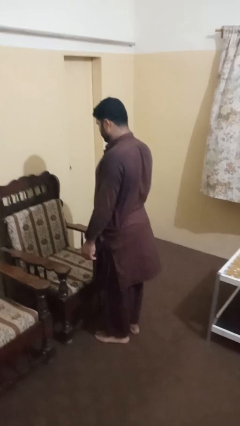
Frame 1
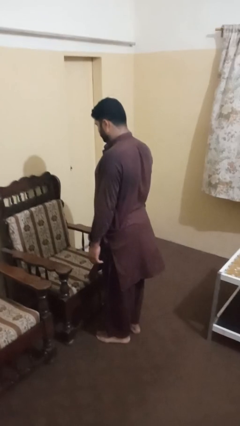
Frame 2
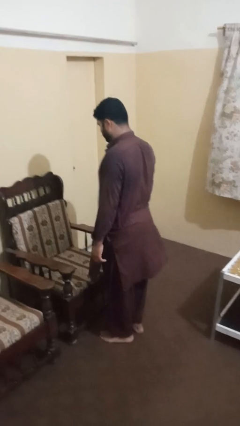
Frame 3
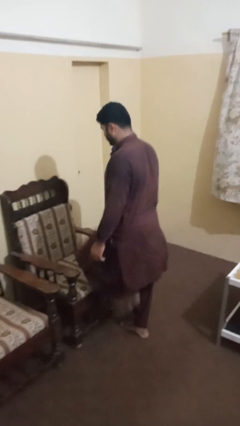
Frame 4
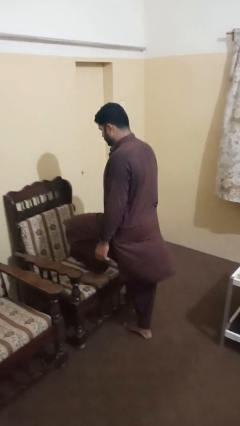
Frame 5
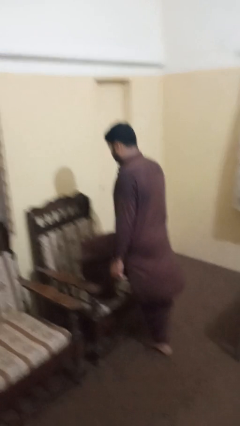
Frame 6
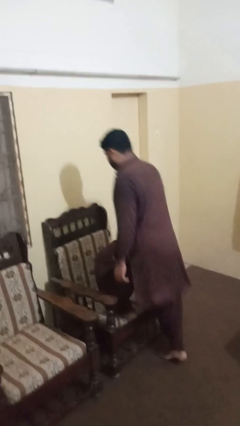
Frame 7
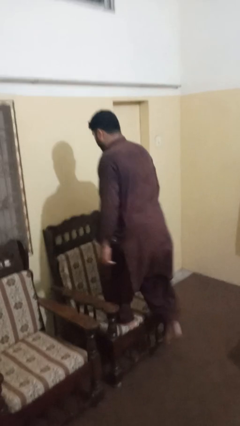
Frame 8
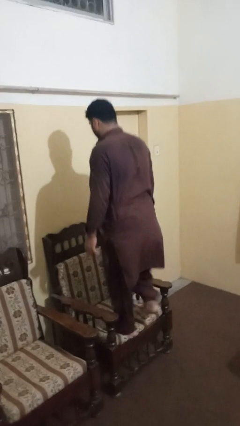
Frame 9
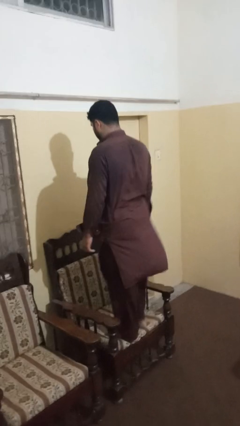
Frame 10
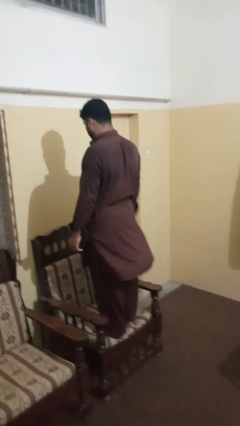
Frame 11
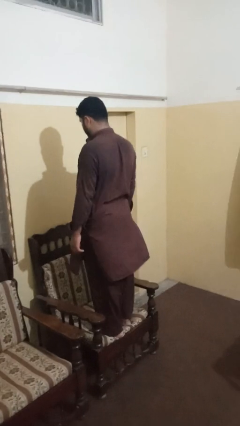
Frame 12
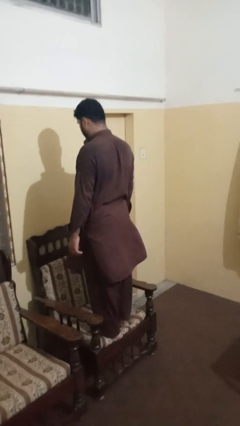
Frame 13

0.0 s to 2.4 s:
person climbs on chair

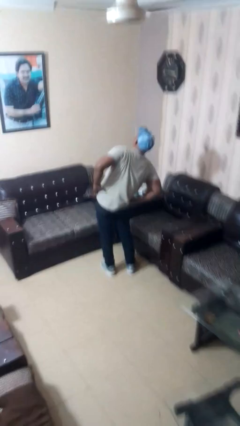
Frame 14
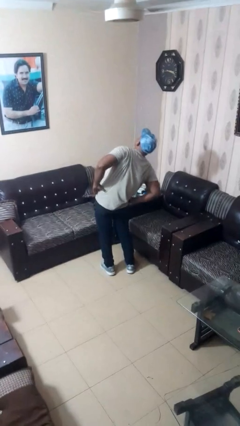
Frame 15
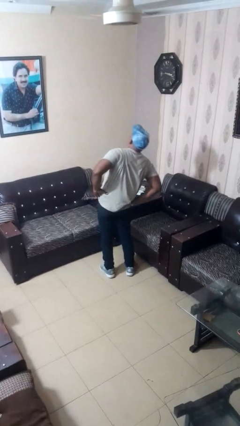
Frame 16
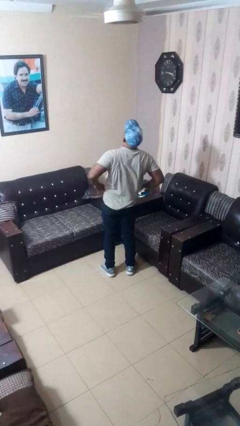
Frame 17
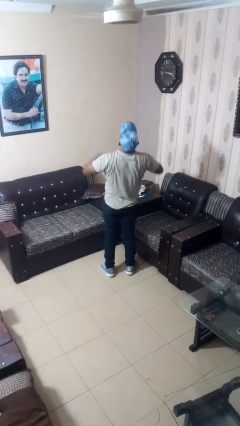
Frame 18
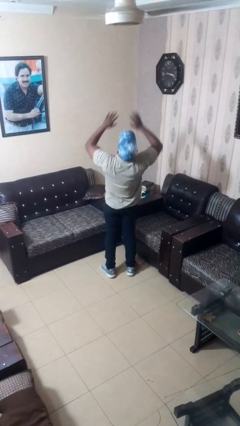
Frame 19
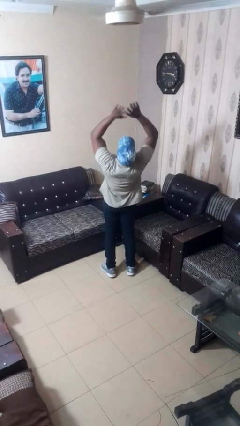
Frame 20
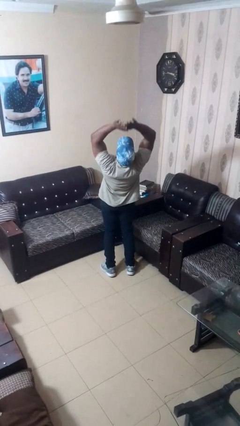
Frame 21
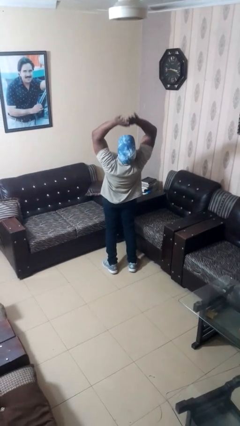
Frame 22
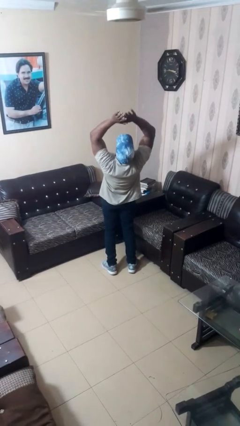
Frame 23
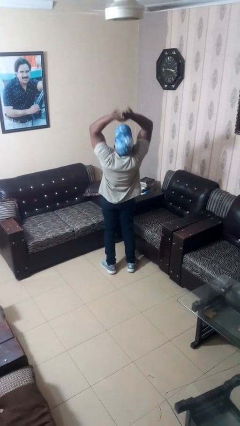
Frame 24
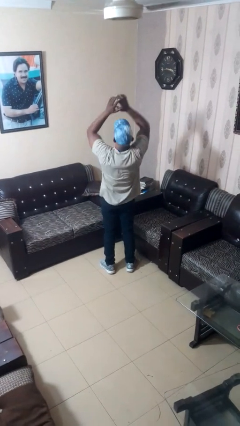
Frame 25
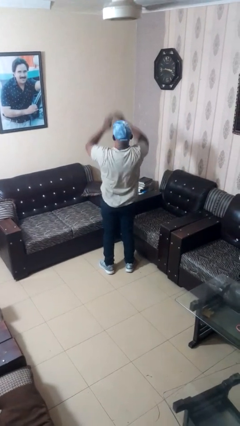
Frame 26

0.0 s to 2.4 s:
person stretches arms over head

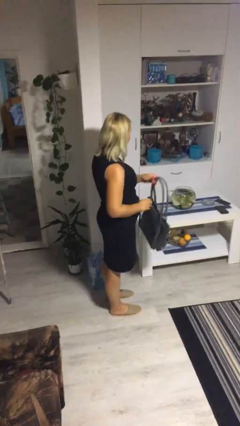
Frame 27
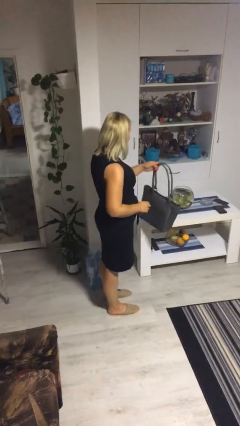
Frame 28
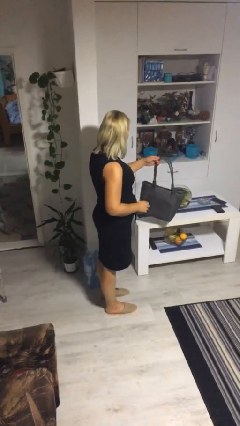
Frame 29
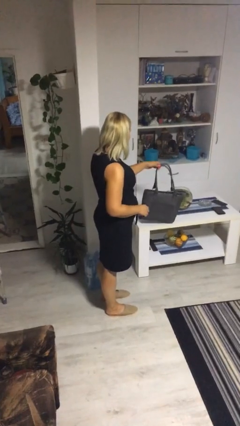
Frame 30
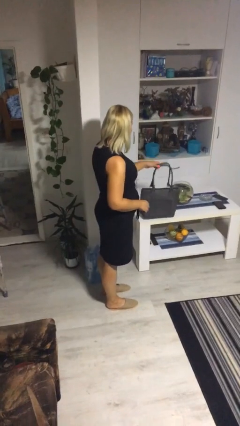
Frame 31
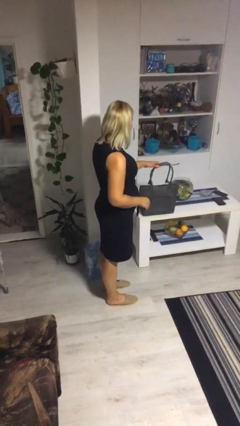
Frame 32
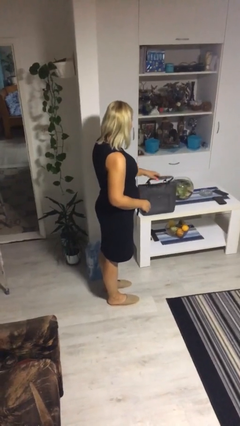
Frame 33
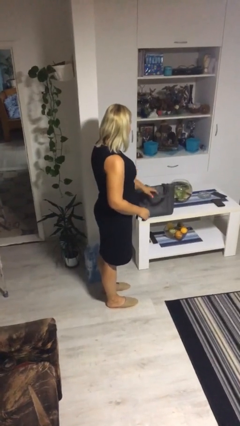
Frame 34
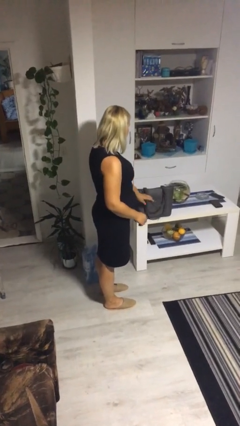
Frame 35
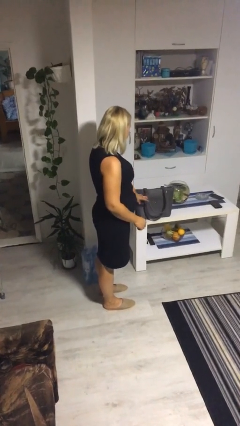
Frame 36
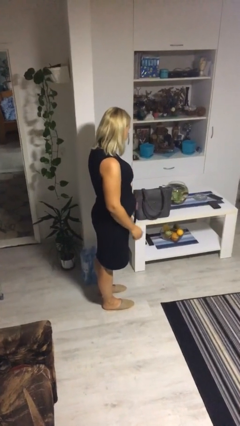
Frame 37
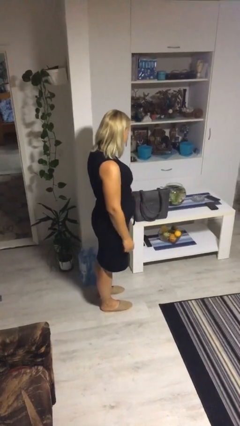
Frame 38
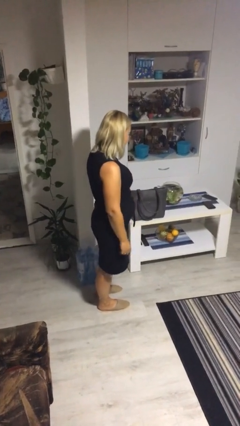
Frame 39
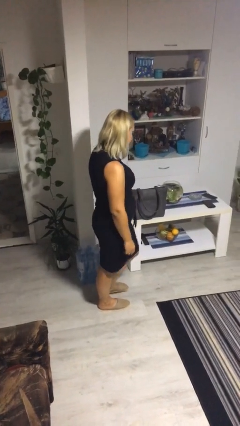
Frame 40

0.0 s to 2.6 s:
person puts down object on table

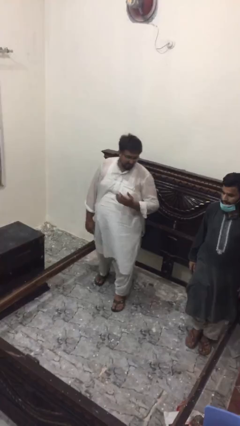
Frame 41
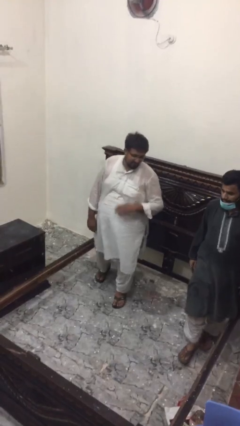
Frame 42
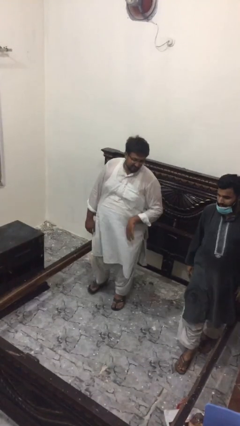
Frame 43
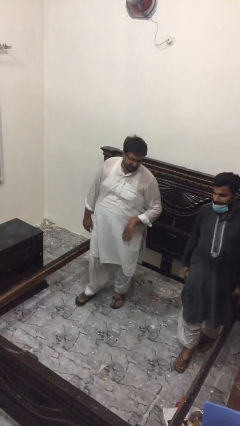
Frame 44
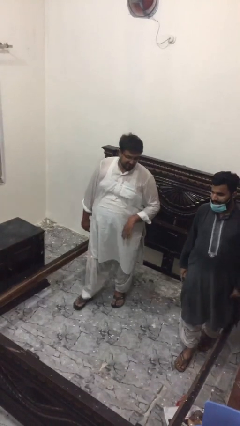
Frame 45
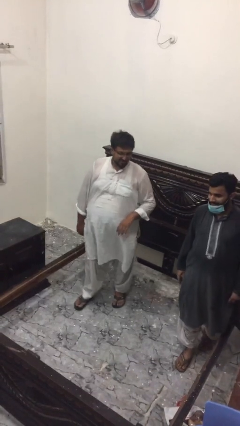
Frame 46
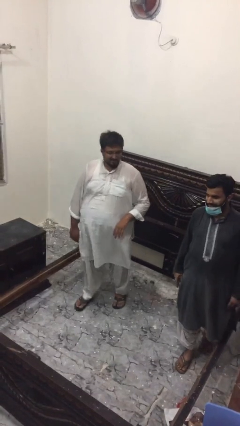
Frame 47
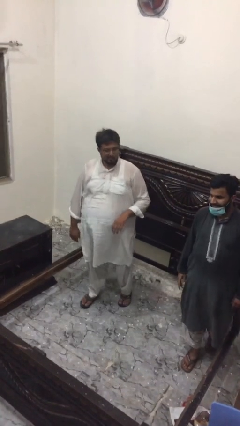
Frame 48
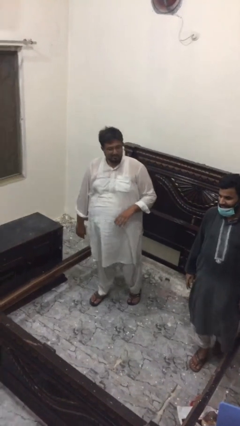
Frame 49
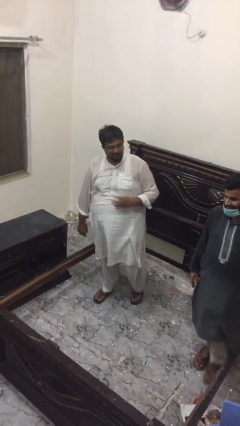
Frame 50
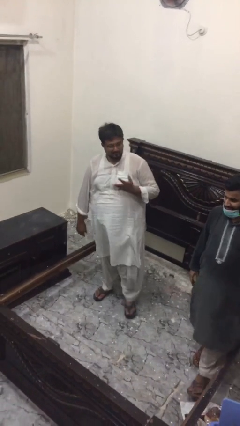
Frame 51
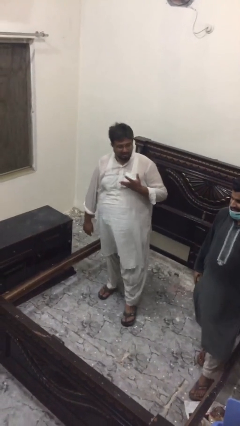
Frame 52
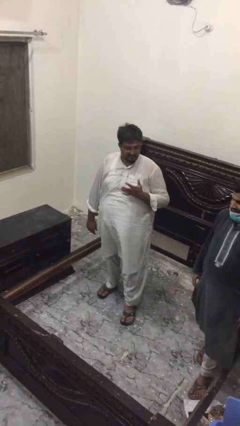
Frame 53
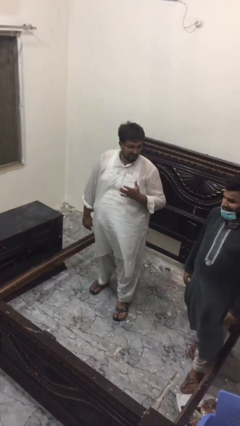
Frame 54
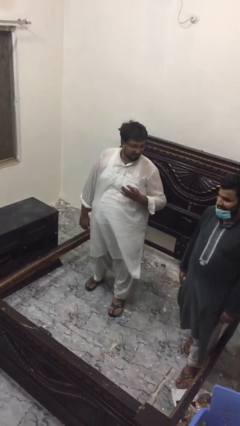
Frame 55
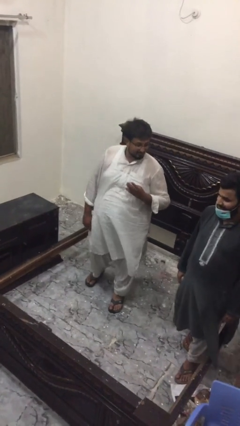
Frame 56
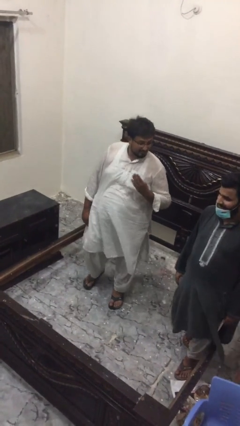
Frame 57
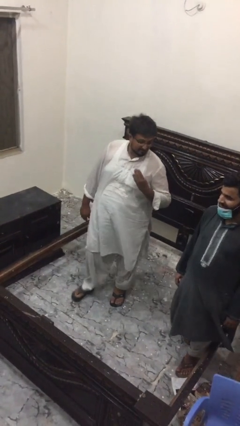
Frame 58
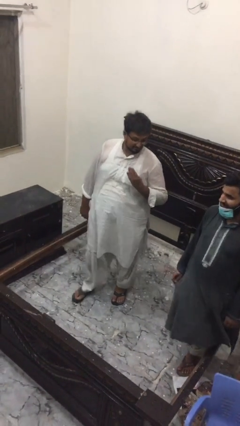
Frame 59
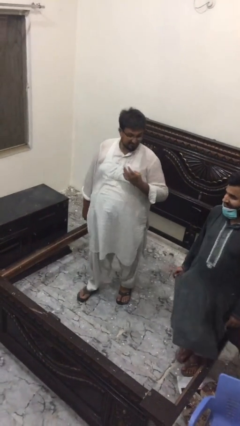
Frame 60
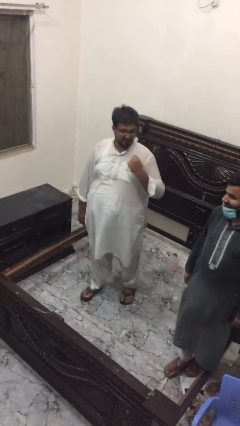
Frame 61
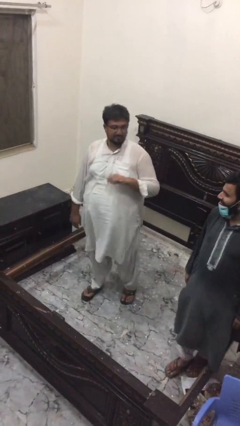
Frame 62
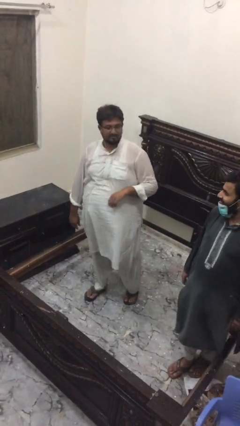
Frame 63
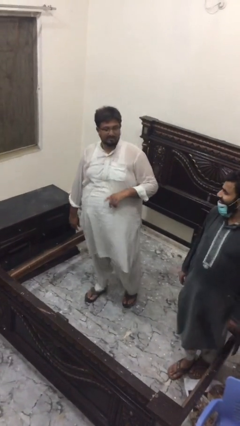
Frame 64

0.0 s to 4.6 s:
person talks to person

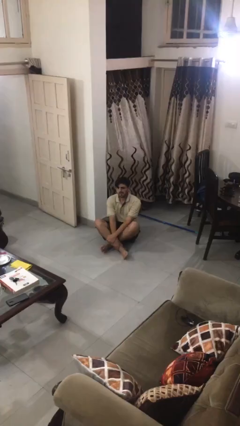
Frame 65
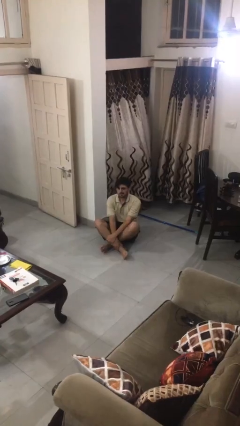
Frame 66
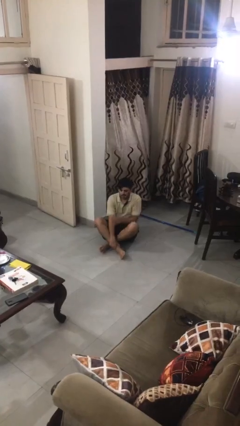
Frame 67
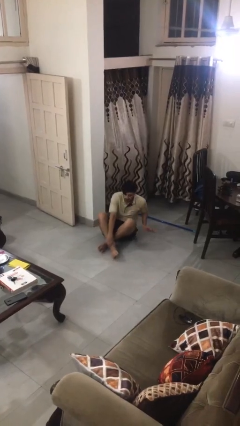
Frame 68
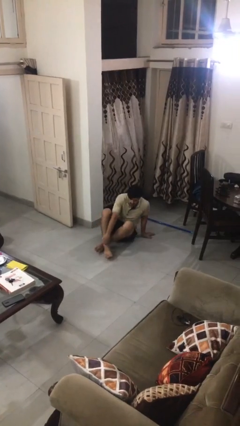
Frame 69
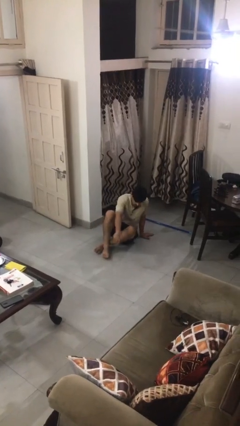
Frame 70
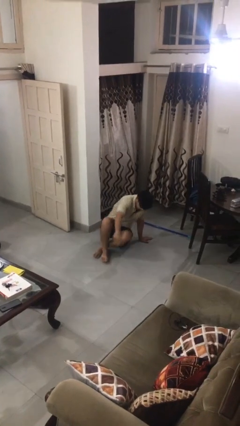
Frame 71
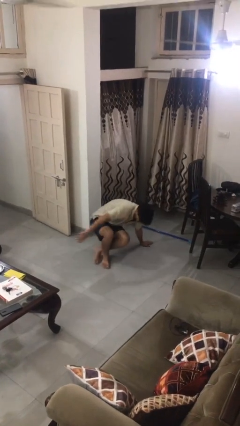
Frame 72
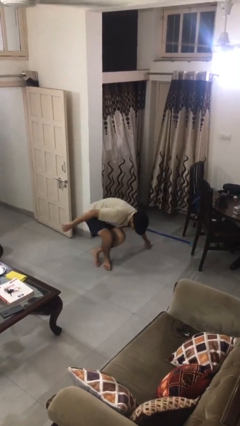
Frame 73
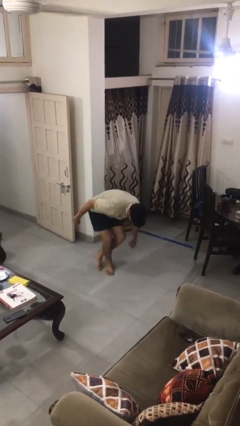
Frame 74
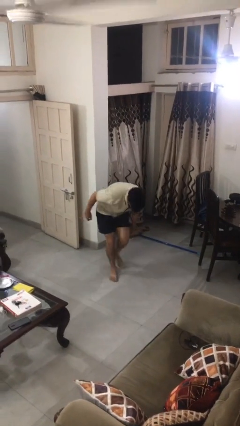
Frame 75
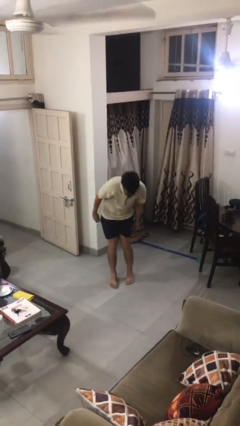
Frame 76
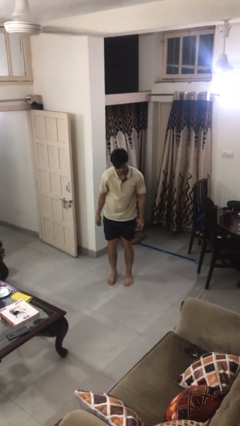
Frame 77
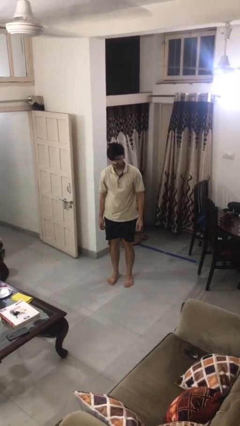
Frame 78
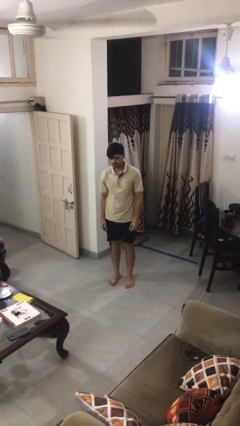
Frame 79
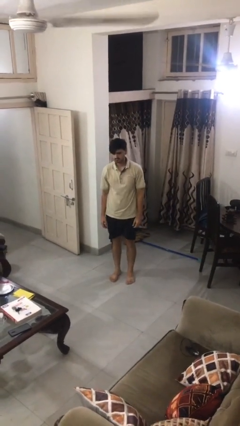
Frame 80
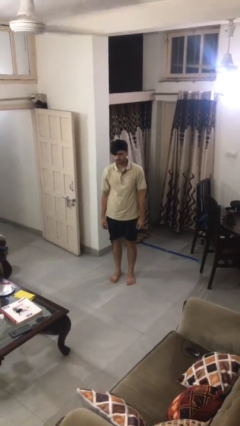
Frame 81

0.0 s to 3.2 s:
person stands up from floor

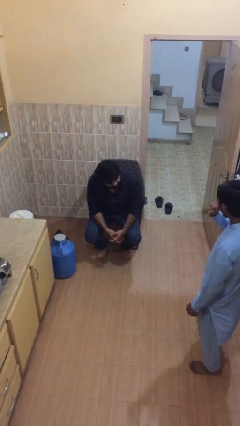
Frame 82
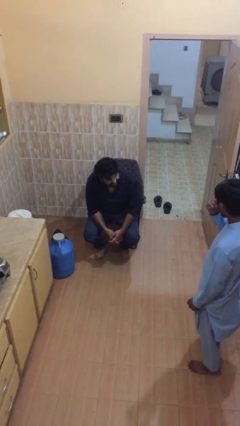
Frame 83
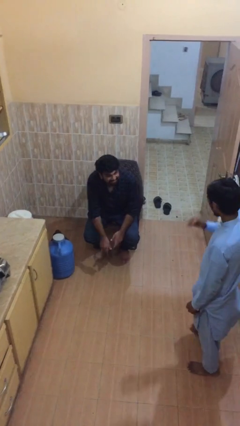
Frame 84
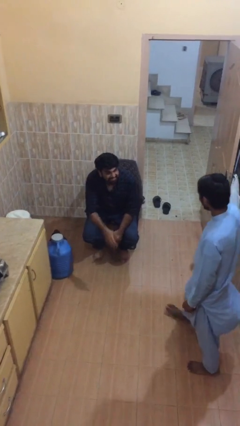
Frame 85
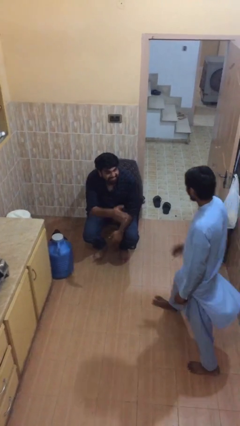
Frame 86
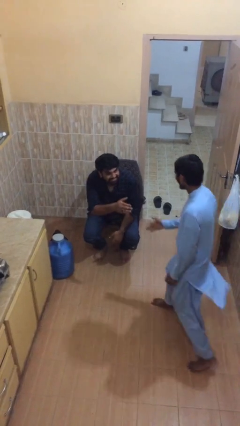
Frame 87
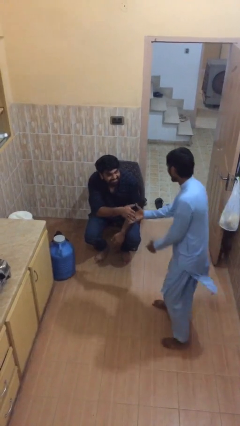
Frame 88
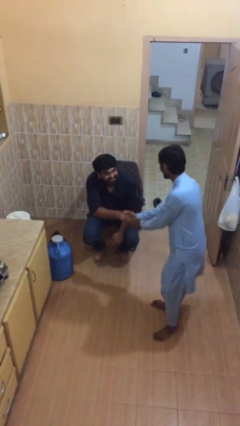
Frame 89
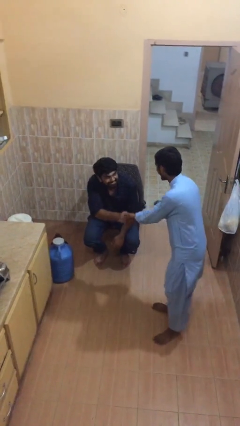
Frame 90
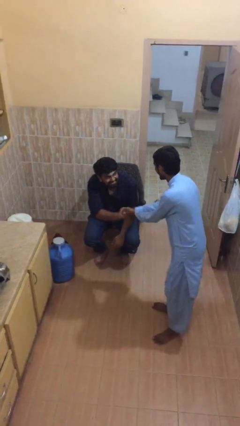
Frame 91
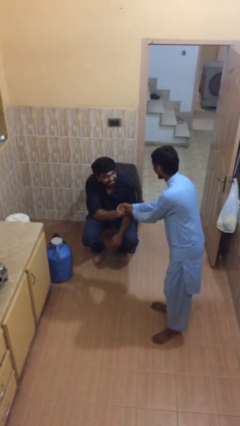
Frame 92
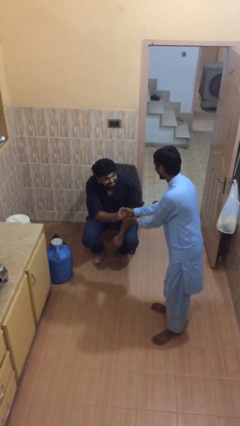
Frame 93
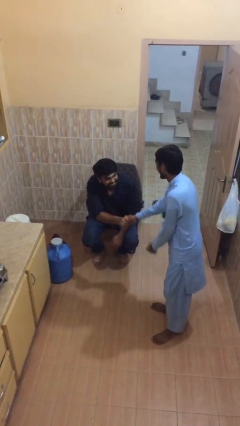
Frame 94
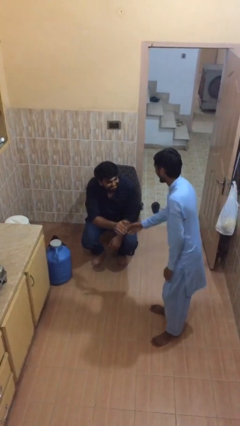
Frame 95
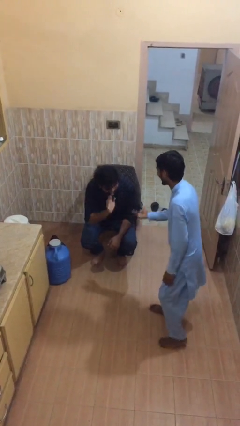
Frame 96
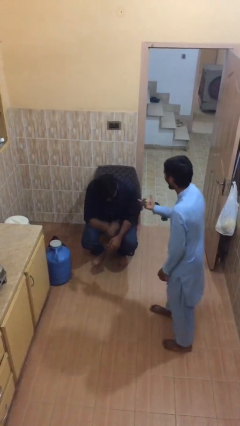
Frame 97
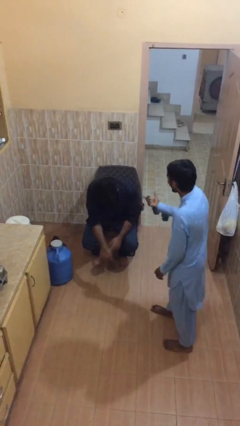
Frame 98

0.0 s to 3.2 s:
person shakes hand
